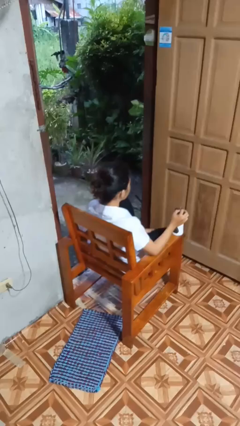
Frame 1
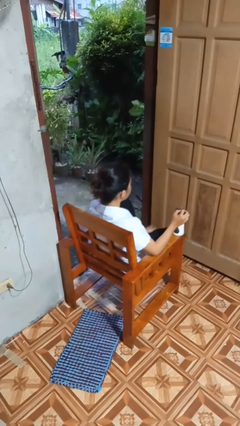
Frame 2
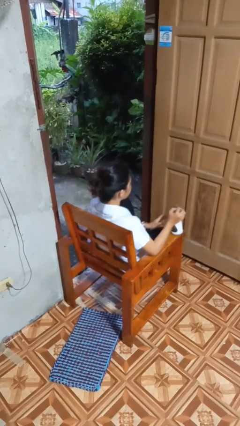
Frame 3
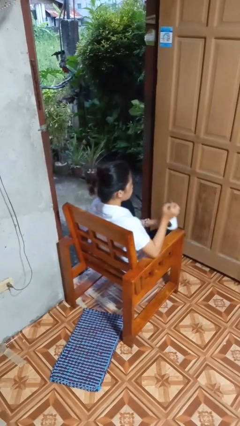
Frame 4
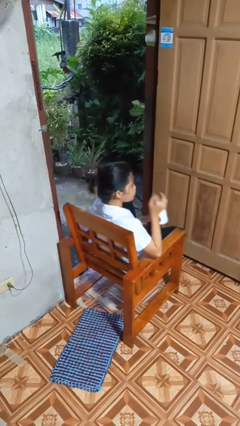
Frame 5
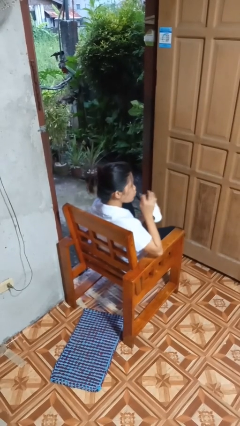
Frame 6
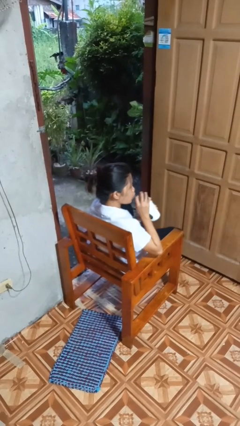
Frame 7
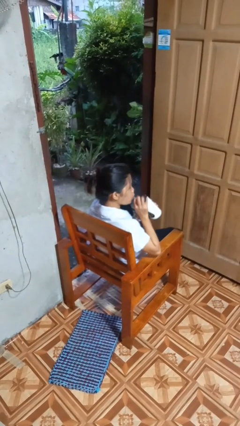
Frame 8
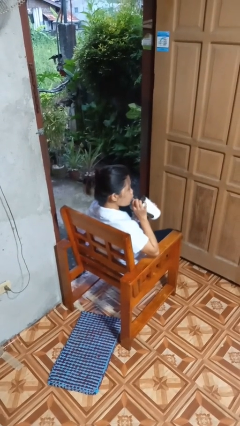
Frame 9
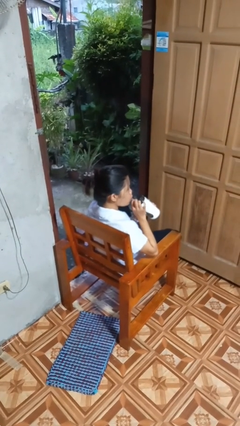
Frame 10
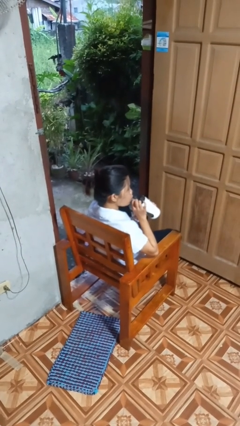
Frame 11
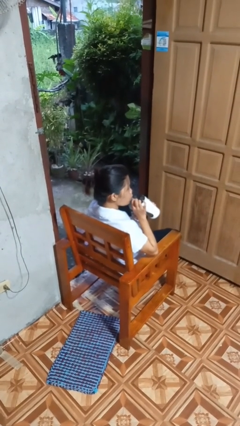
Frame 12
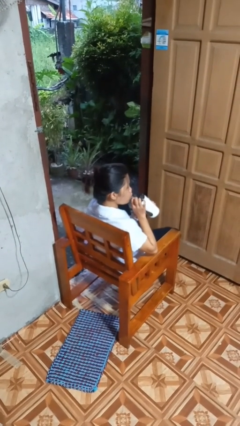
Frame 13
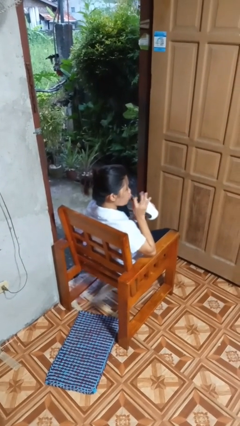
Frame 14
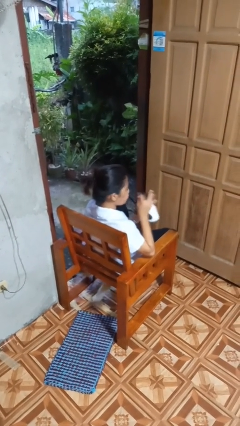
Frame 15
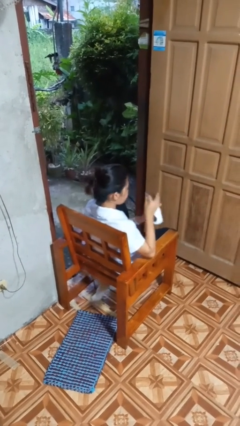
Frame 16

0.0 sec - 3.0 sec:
person drinks from straw

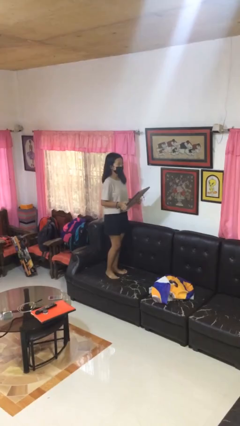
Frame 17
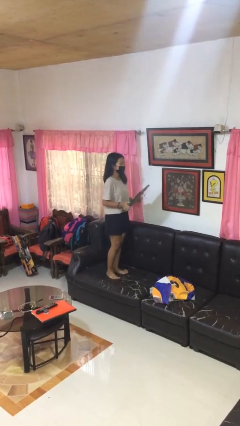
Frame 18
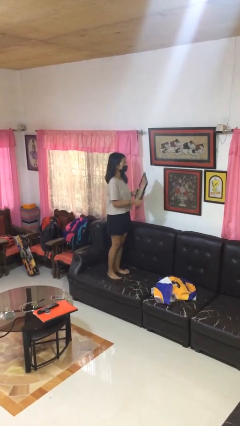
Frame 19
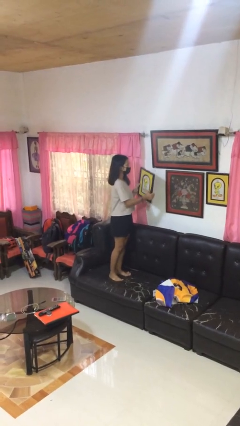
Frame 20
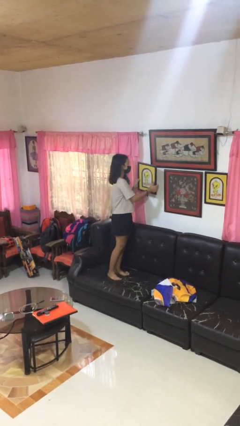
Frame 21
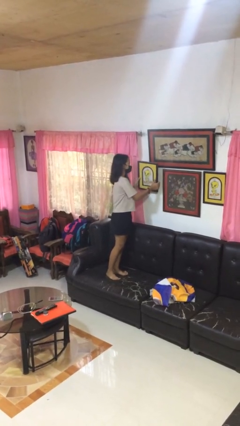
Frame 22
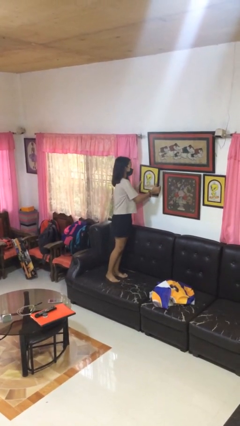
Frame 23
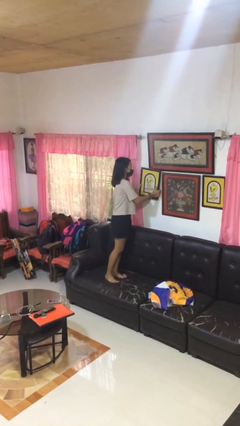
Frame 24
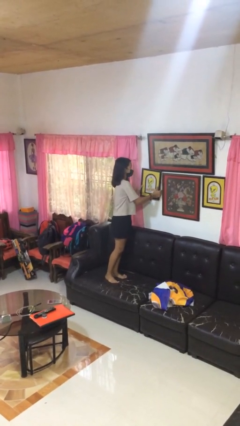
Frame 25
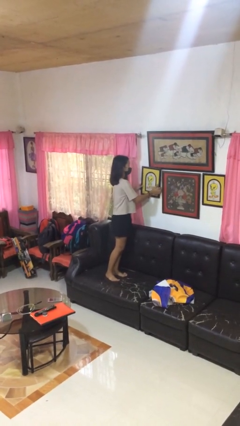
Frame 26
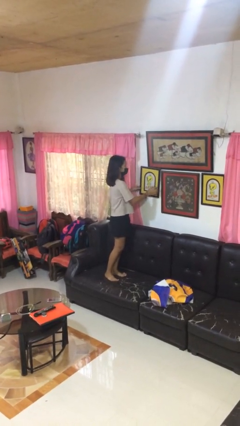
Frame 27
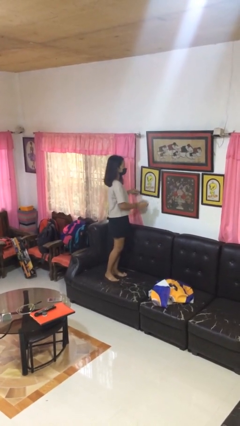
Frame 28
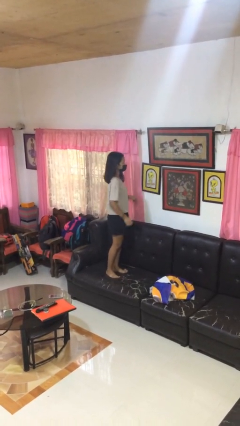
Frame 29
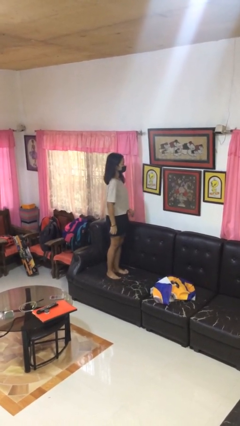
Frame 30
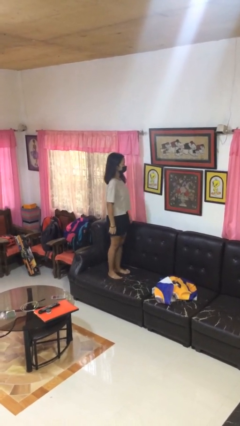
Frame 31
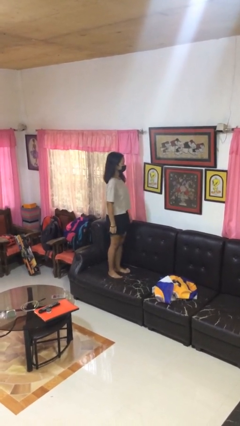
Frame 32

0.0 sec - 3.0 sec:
person puts up picture frame

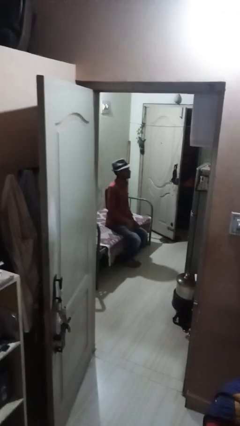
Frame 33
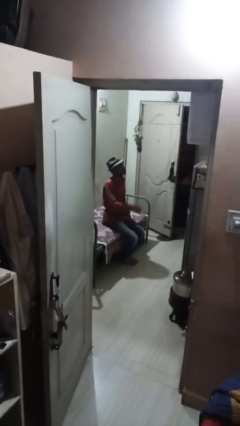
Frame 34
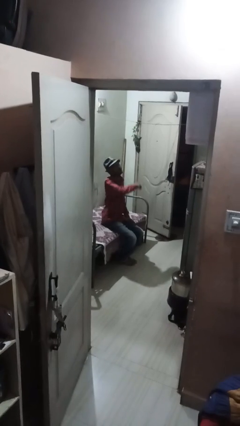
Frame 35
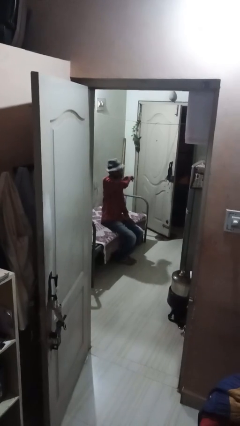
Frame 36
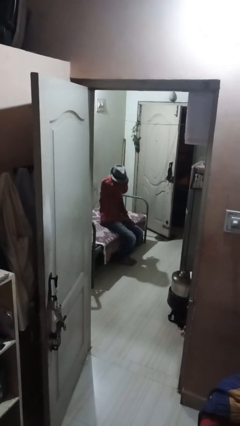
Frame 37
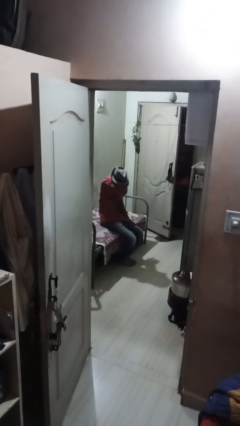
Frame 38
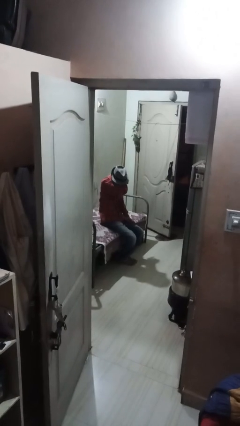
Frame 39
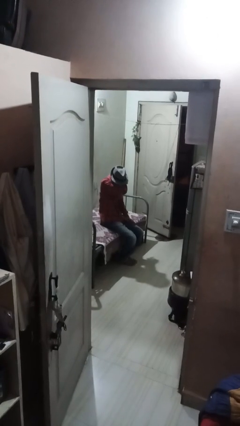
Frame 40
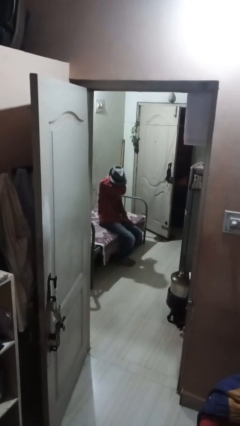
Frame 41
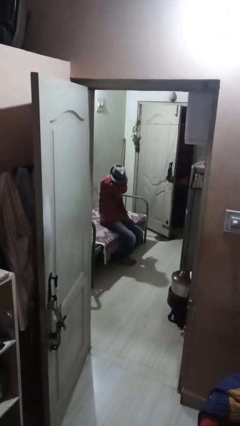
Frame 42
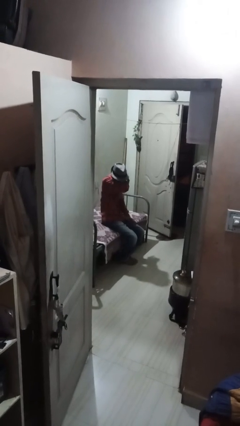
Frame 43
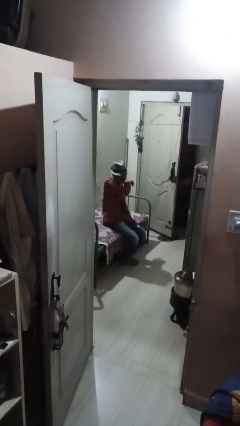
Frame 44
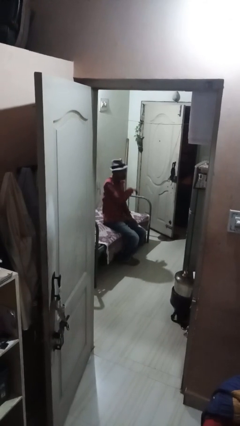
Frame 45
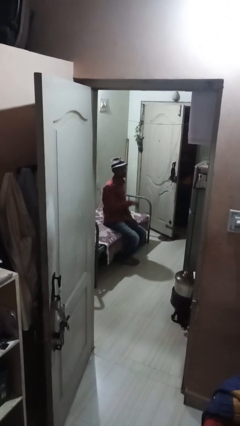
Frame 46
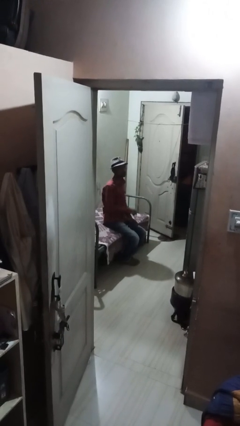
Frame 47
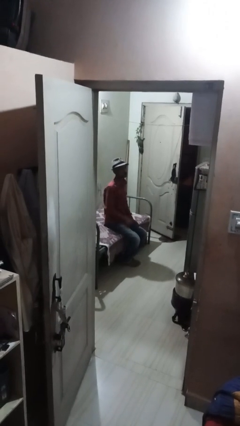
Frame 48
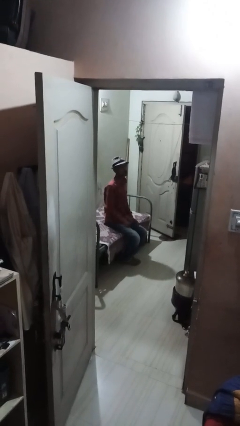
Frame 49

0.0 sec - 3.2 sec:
person sneezes into arm

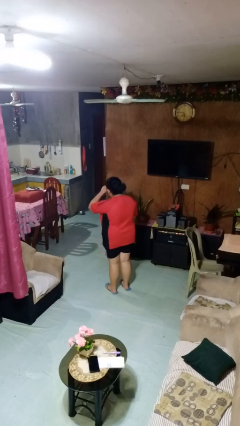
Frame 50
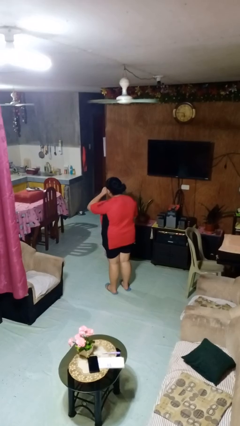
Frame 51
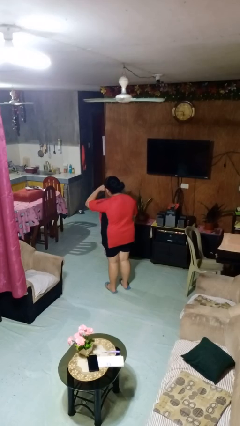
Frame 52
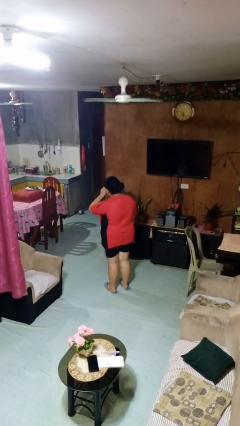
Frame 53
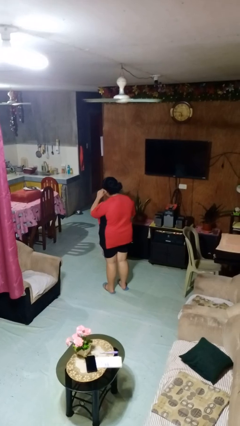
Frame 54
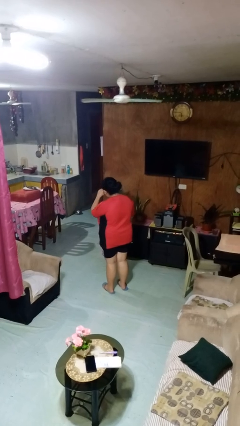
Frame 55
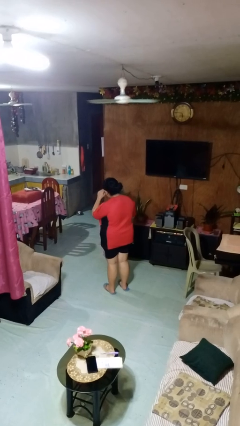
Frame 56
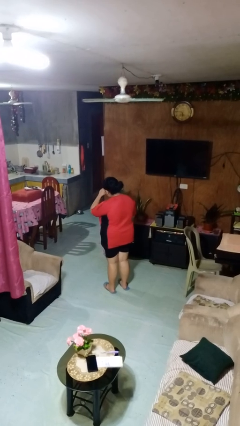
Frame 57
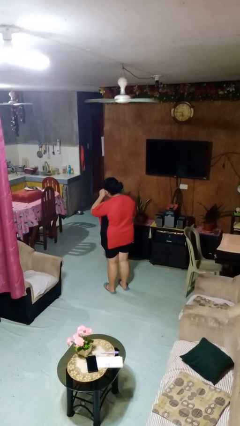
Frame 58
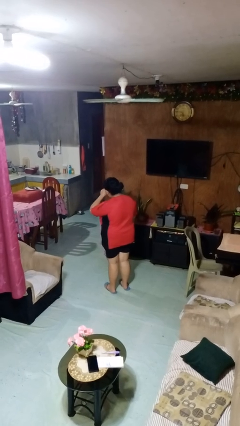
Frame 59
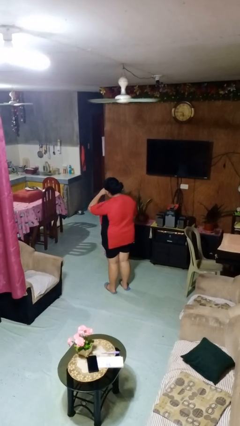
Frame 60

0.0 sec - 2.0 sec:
person rubs eyes

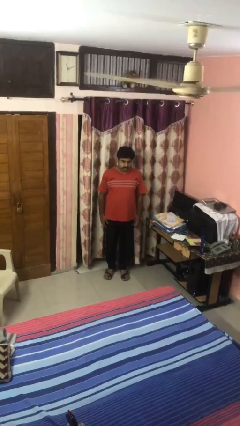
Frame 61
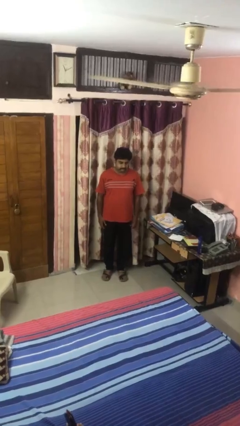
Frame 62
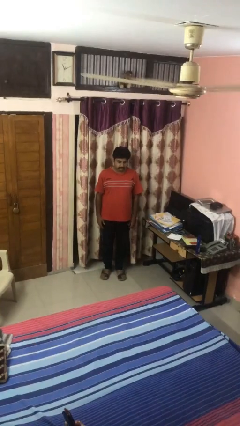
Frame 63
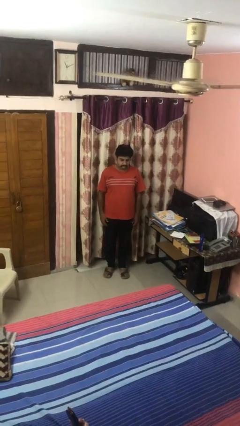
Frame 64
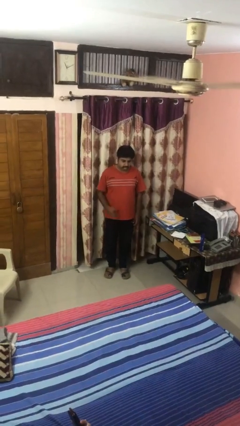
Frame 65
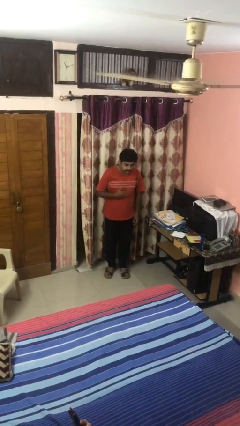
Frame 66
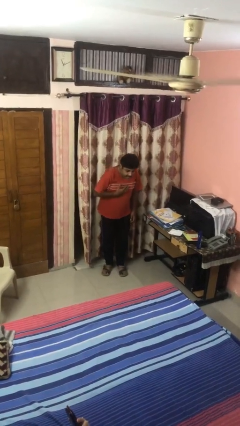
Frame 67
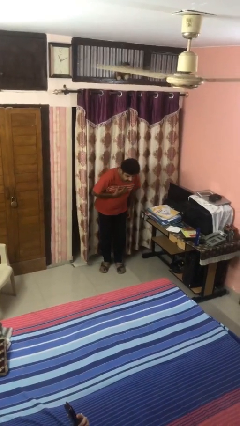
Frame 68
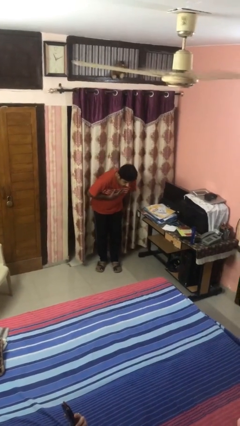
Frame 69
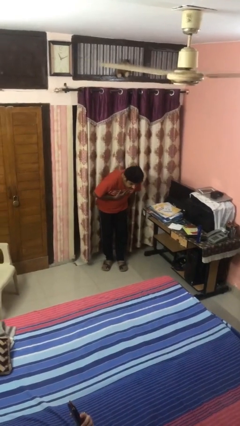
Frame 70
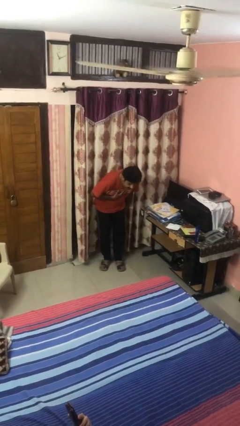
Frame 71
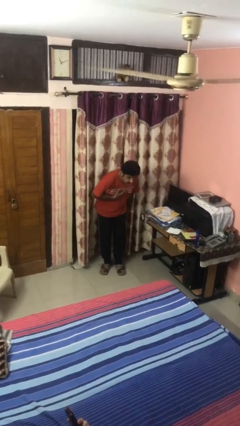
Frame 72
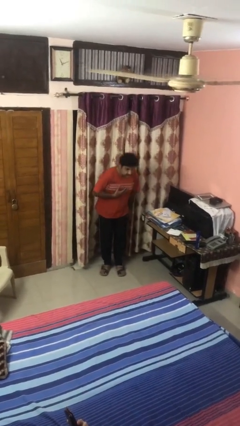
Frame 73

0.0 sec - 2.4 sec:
person bows

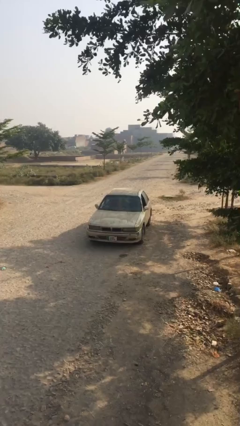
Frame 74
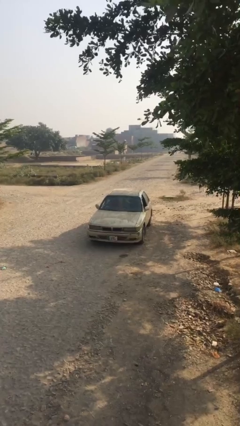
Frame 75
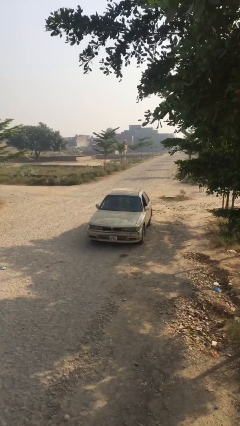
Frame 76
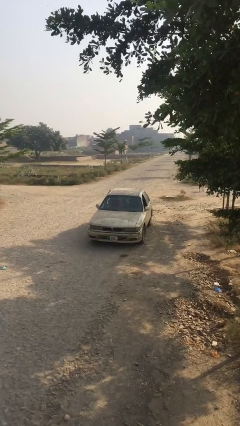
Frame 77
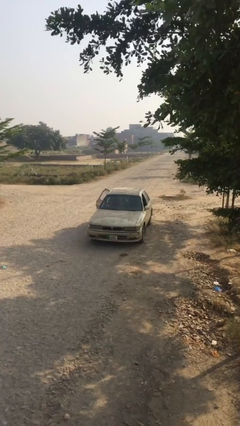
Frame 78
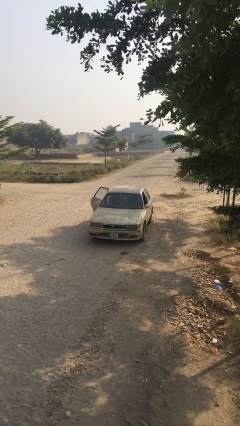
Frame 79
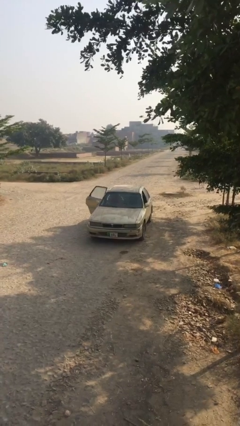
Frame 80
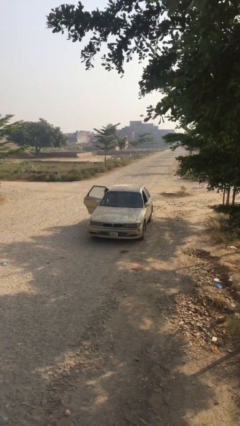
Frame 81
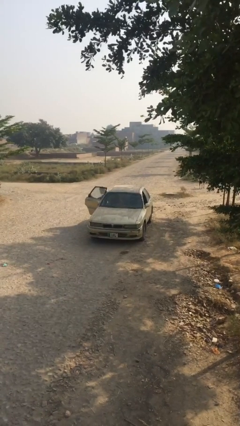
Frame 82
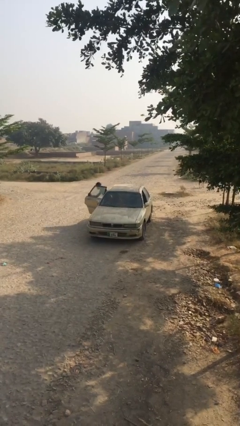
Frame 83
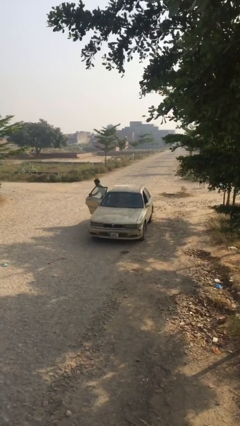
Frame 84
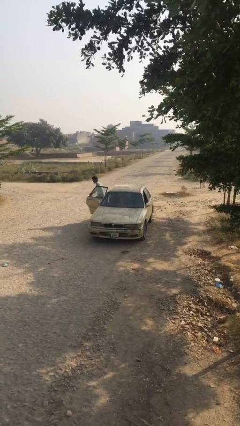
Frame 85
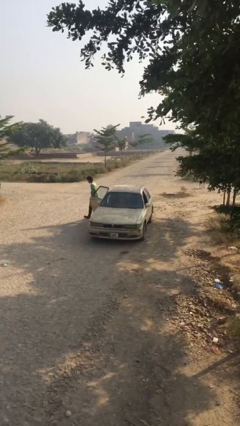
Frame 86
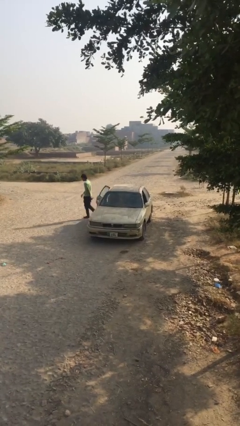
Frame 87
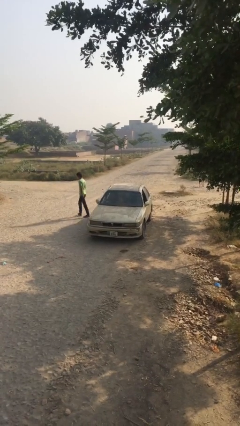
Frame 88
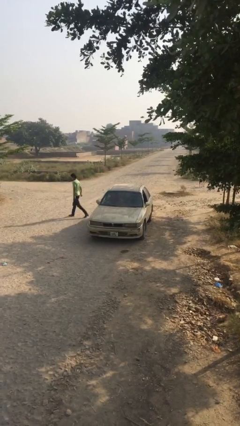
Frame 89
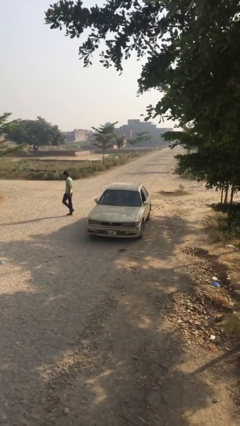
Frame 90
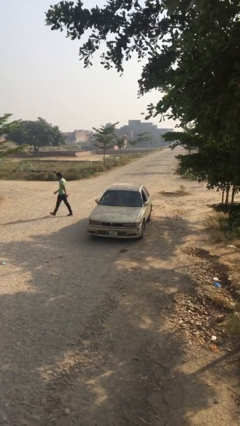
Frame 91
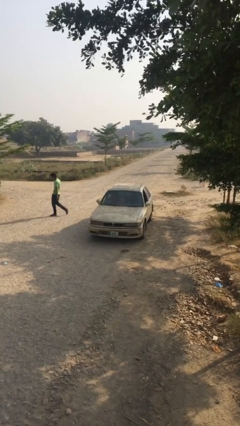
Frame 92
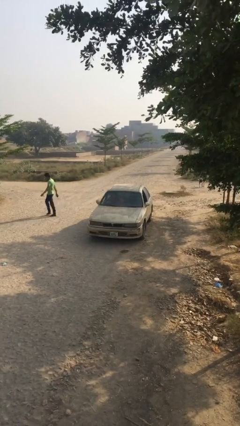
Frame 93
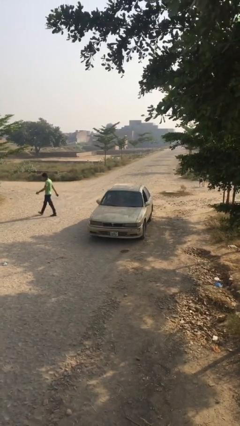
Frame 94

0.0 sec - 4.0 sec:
car drops off person
